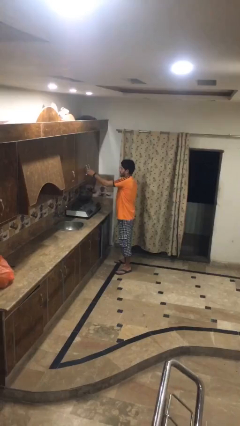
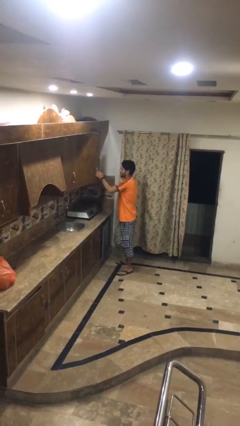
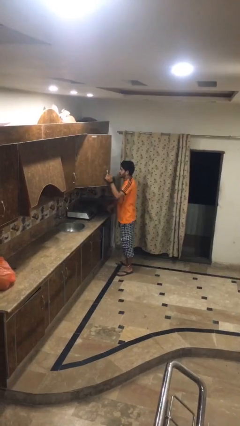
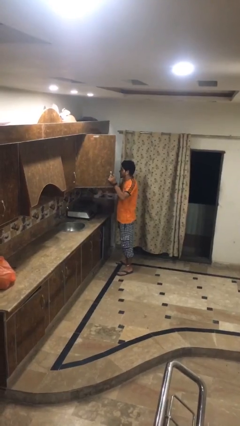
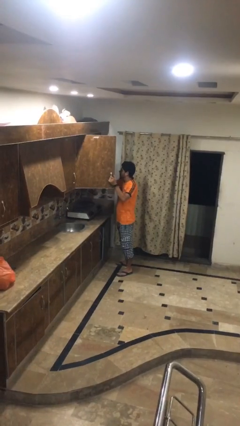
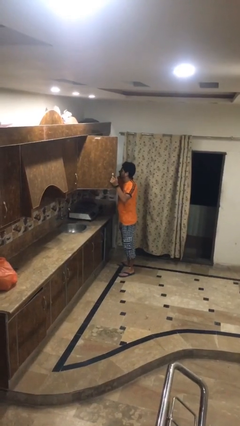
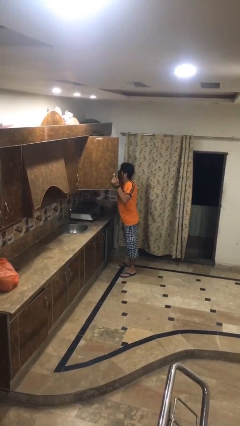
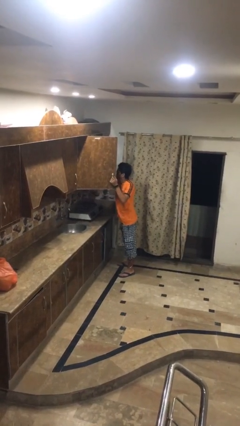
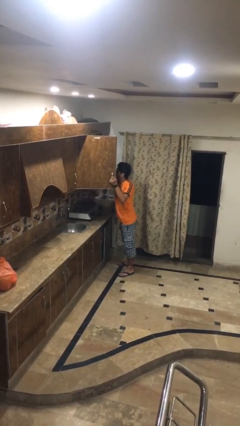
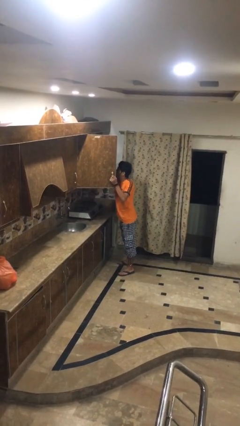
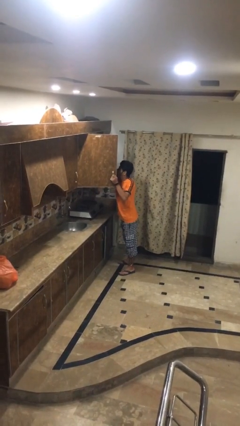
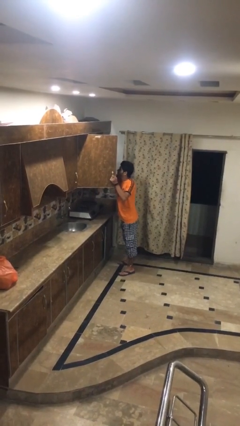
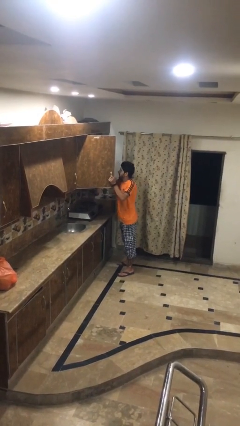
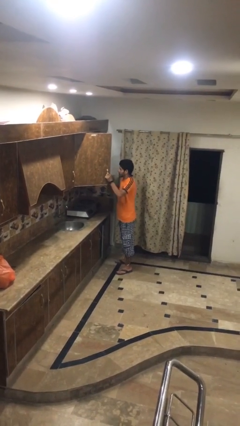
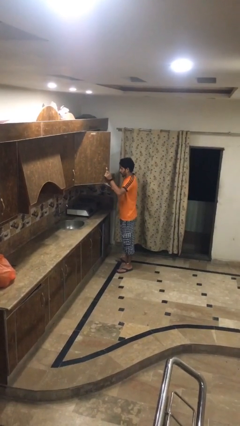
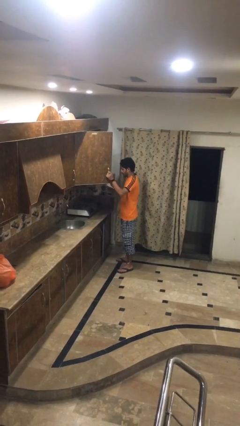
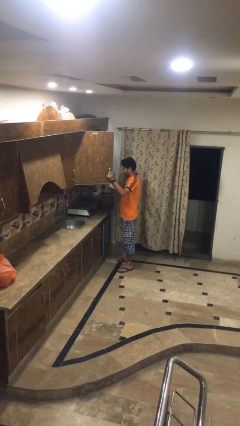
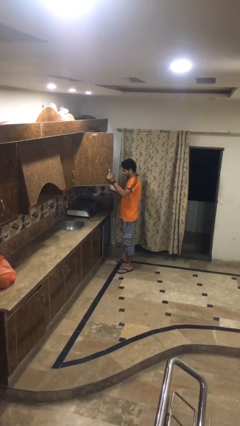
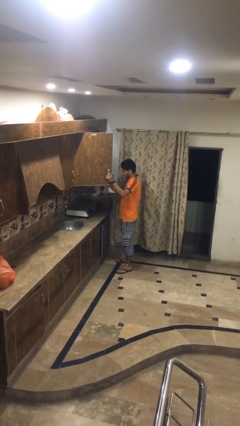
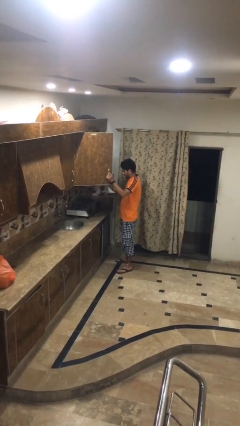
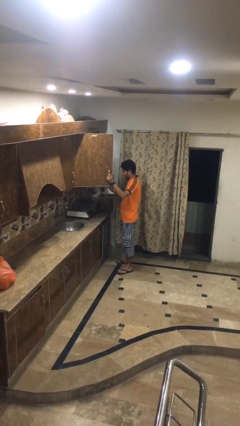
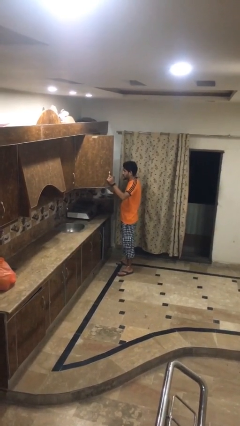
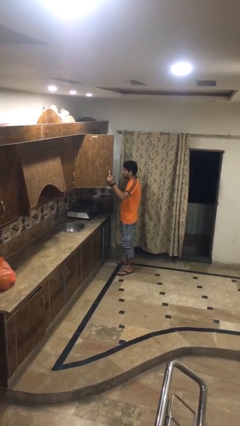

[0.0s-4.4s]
person takes object from kitchen drawer

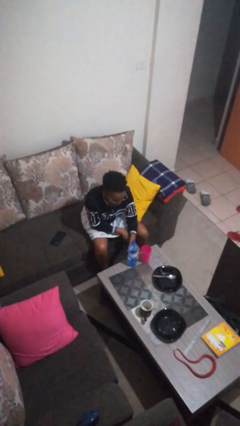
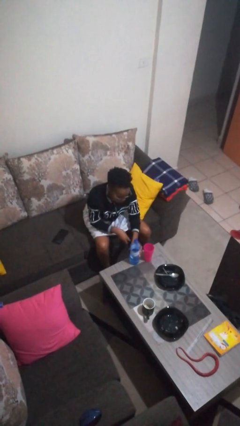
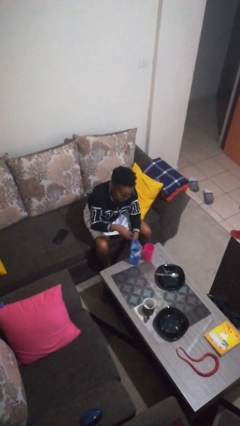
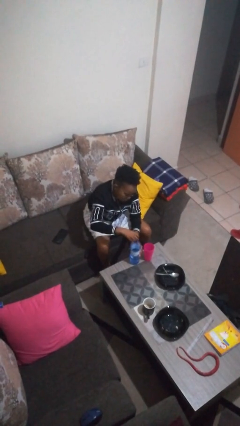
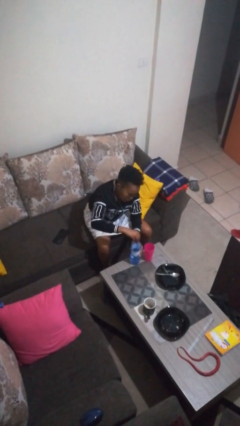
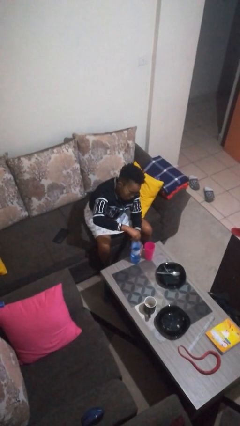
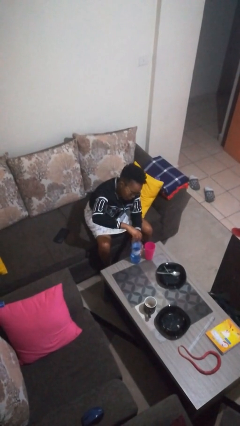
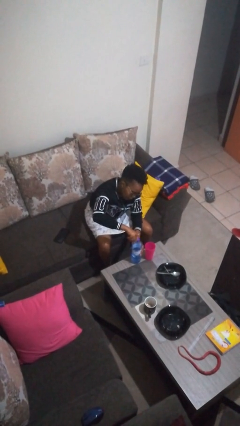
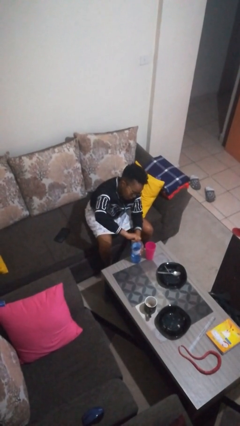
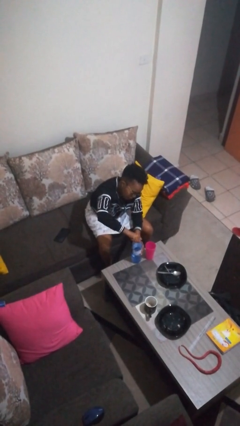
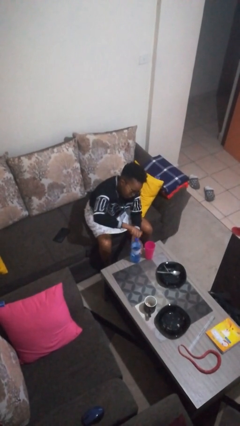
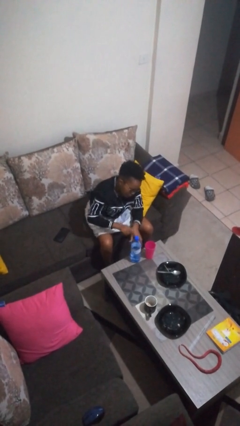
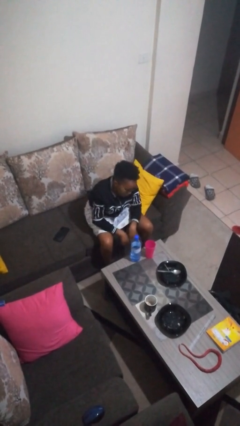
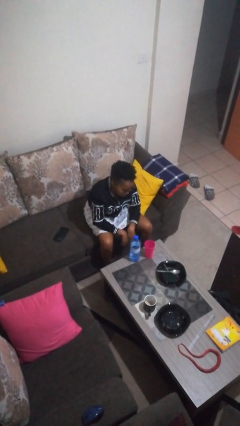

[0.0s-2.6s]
person screws lid to bottle

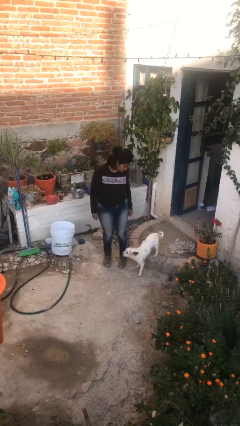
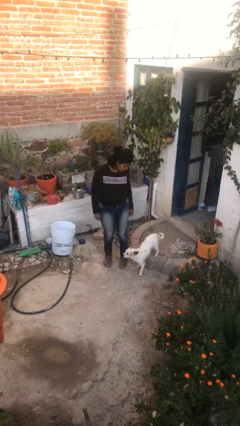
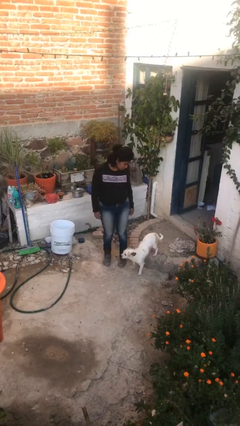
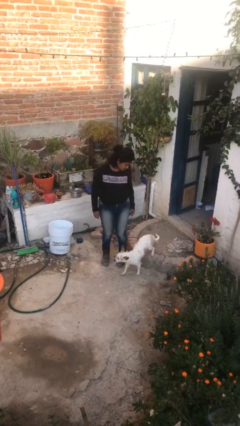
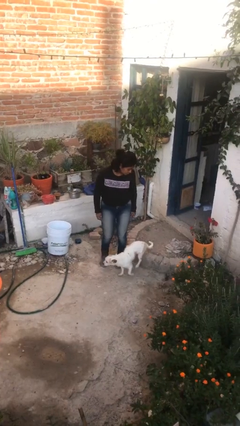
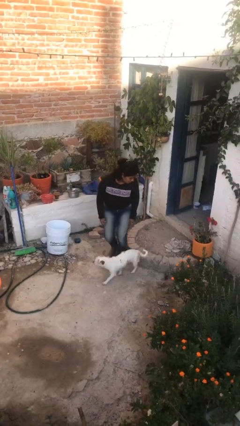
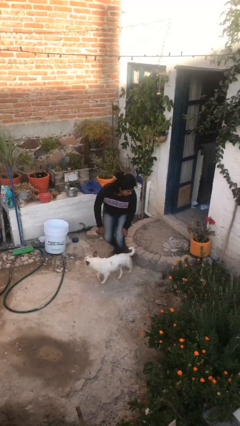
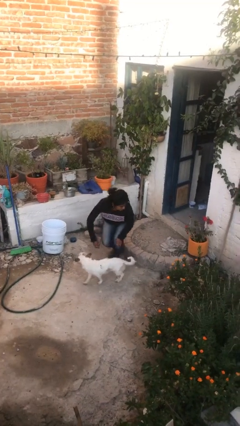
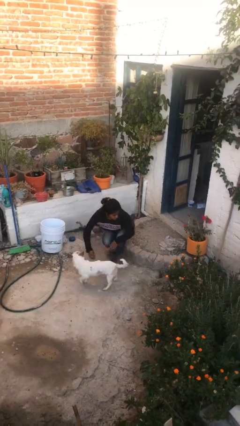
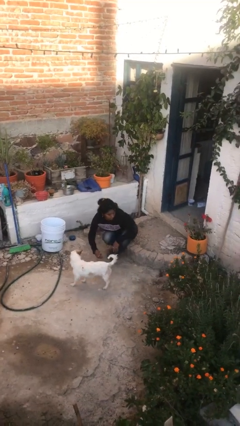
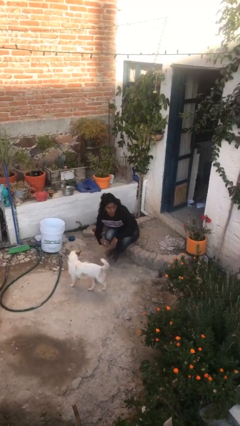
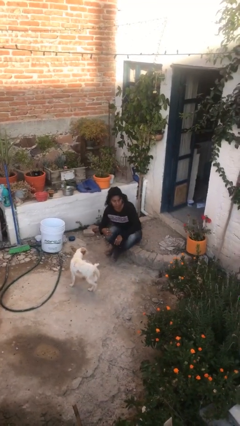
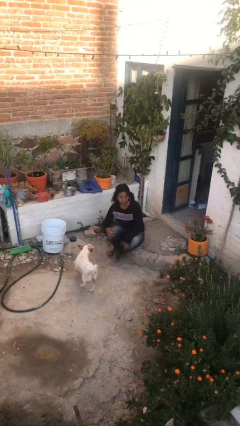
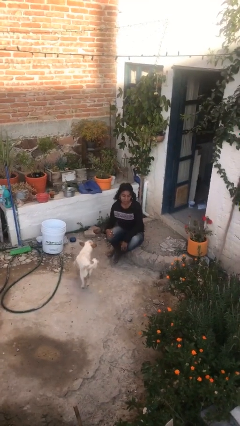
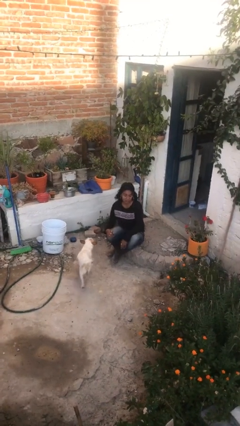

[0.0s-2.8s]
person sits down

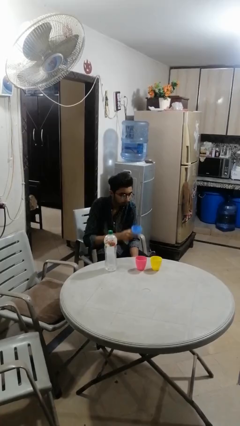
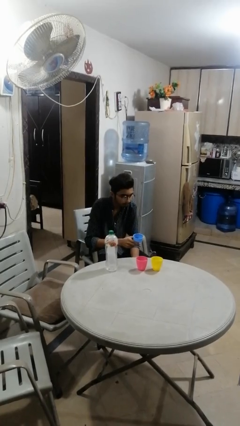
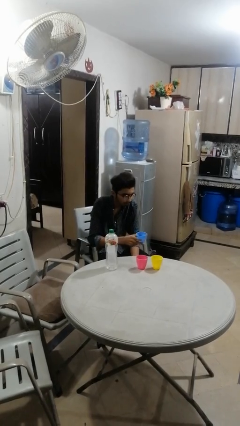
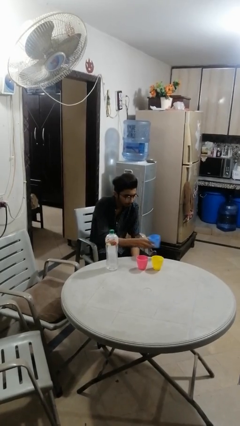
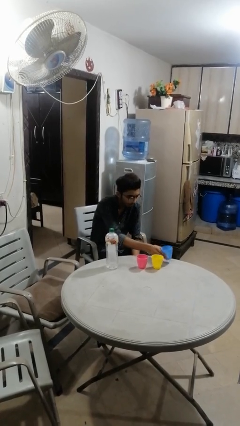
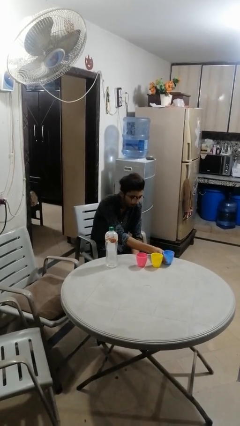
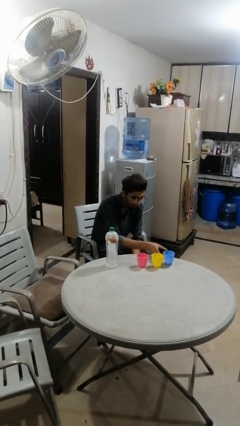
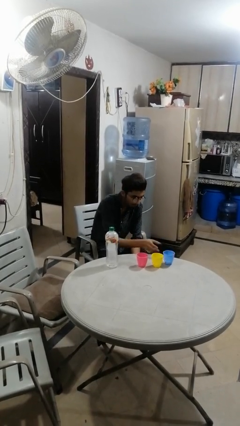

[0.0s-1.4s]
person puts down object on table

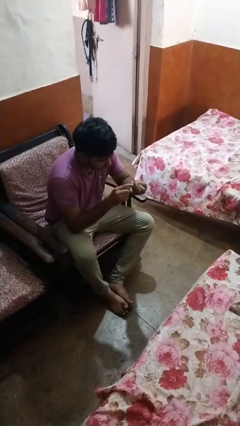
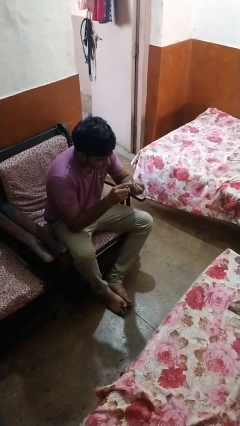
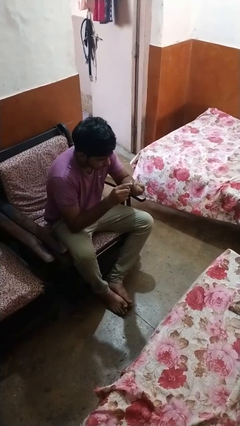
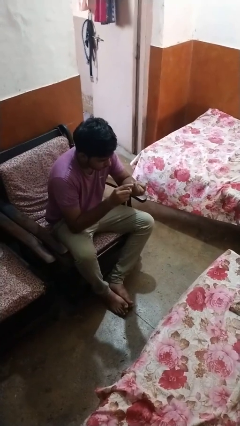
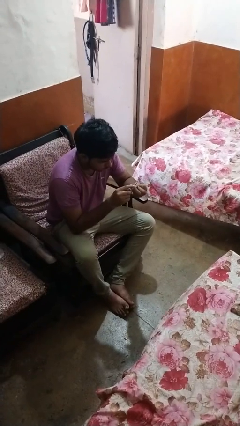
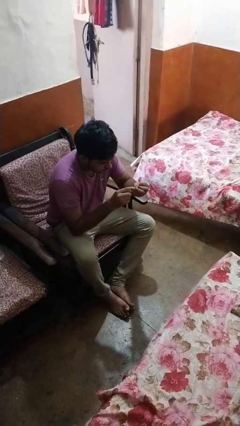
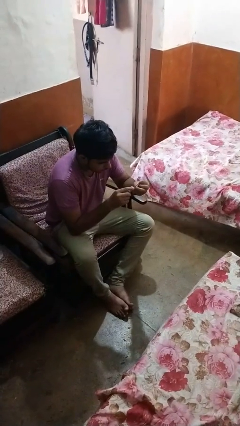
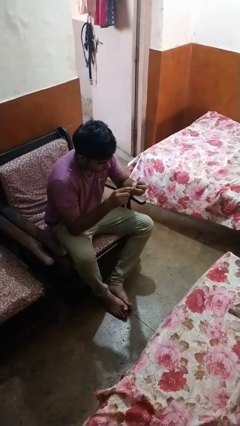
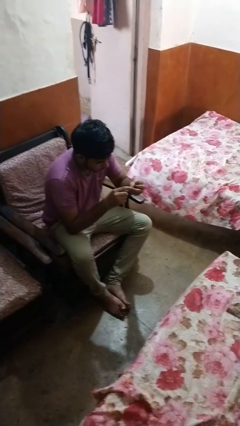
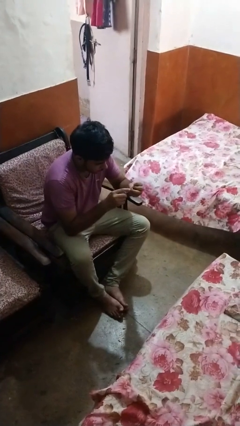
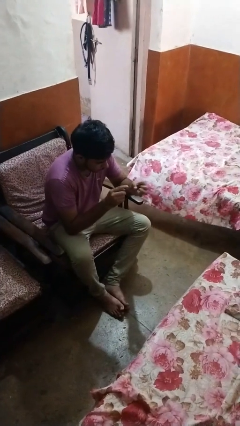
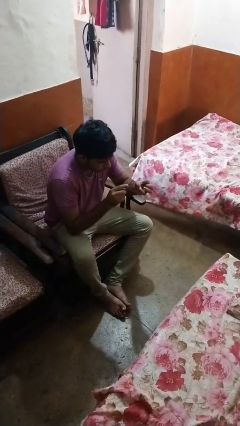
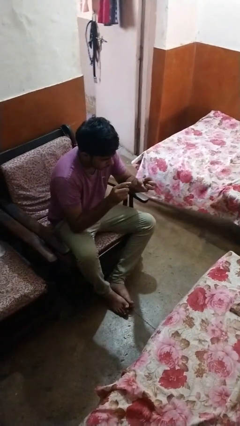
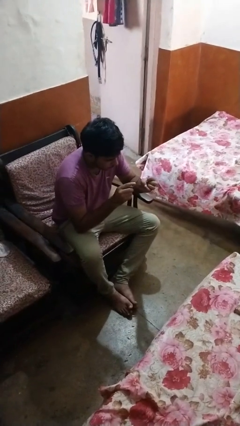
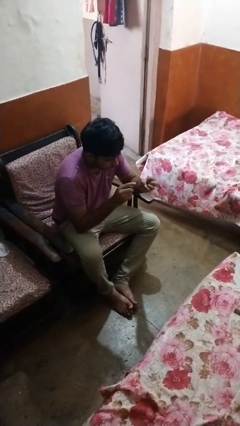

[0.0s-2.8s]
person files fingernails

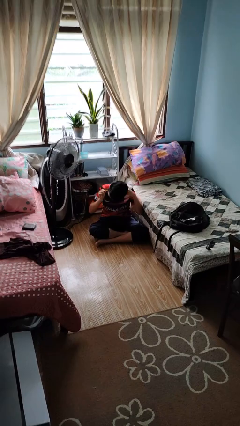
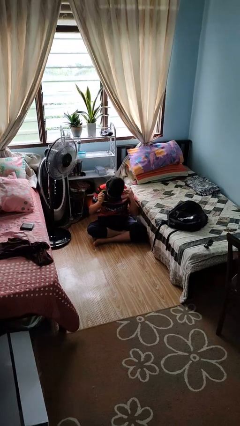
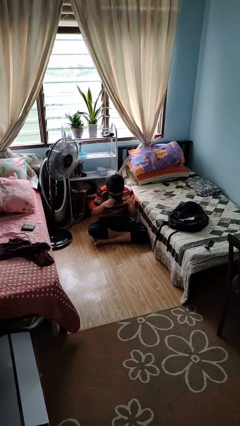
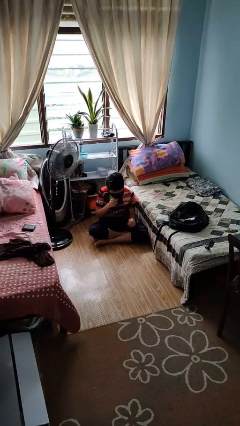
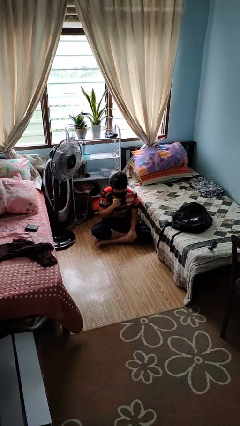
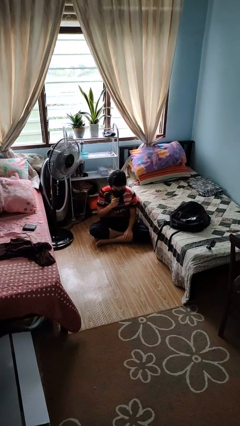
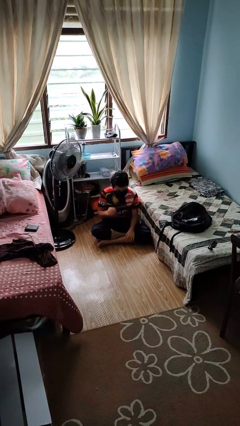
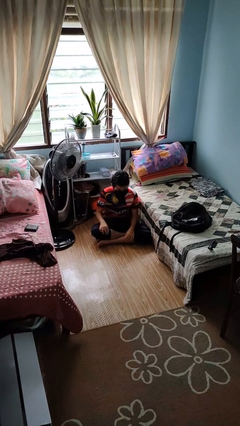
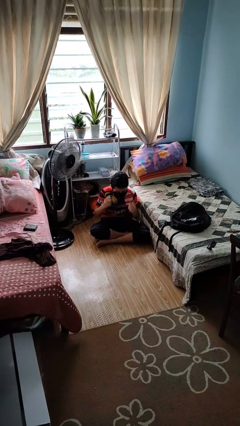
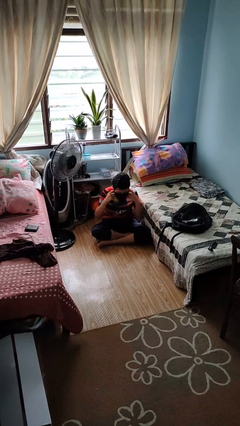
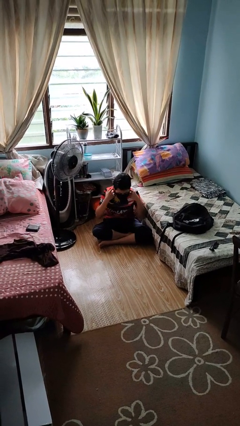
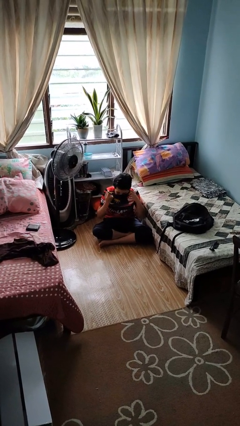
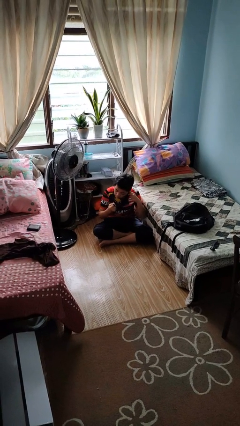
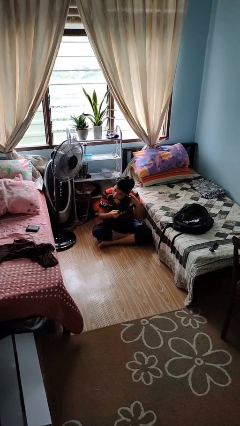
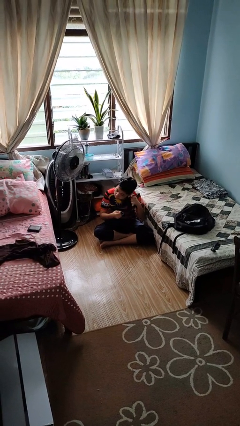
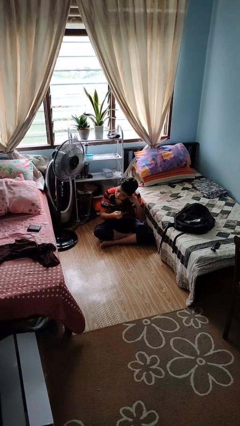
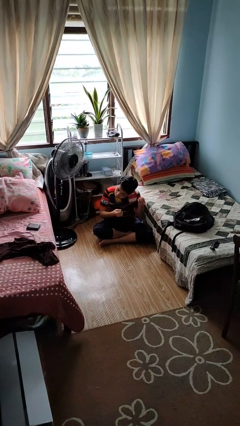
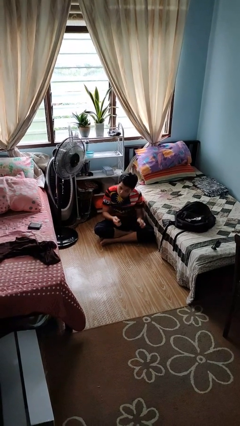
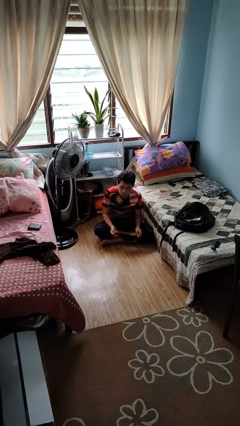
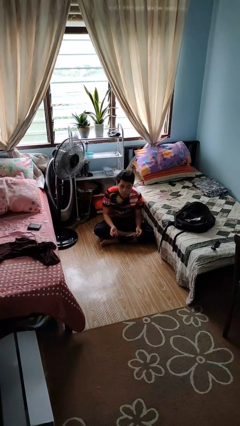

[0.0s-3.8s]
person takes off facemask
